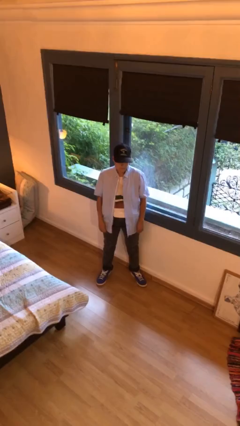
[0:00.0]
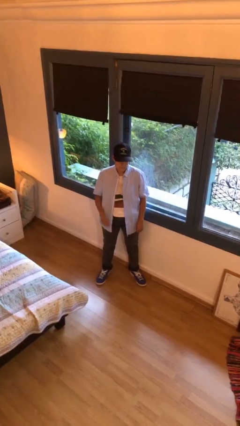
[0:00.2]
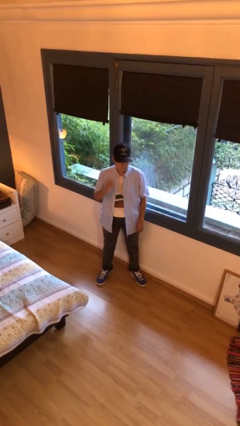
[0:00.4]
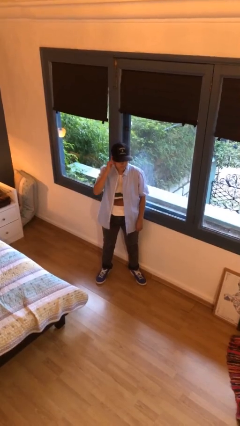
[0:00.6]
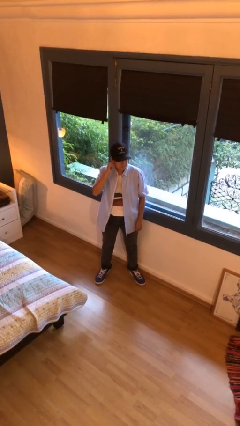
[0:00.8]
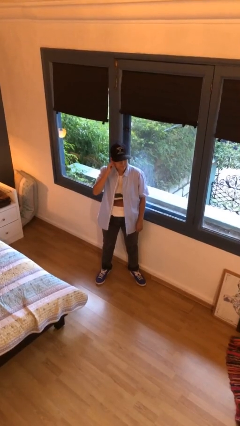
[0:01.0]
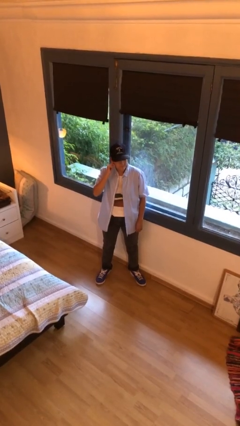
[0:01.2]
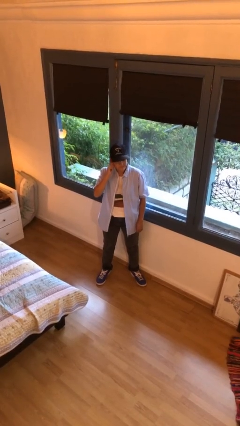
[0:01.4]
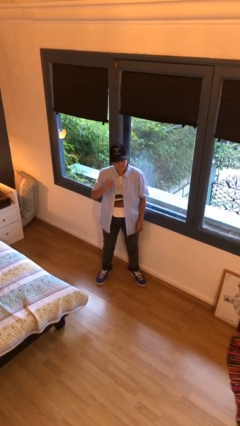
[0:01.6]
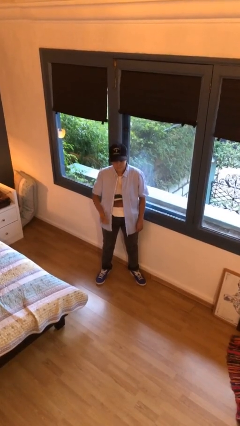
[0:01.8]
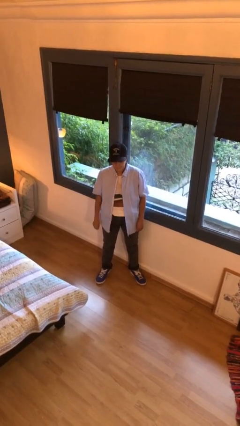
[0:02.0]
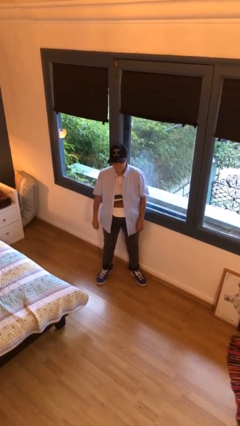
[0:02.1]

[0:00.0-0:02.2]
person touches earlobe

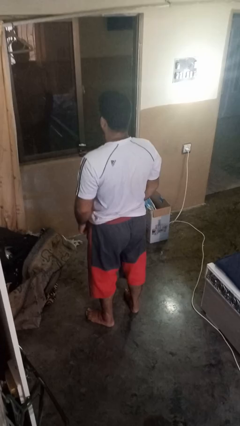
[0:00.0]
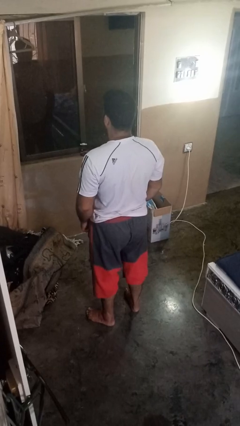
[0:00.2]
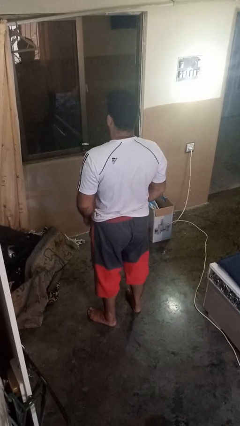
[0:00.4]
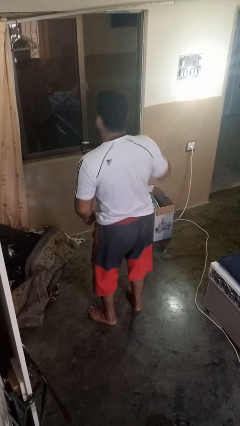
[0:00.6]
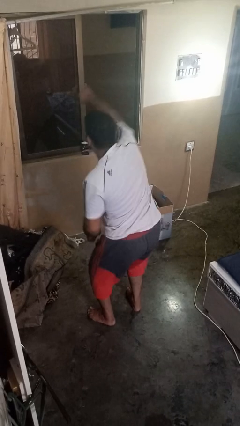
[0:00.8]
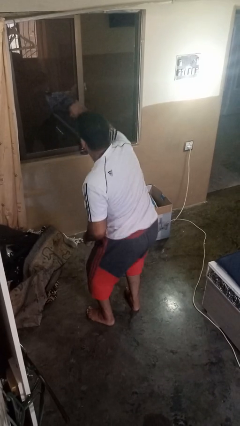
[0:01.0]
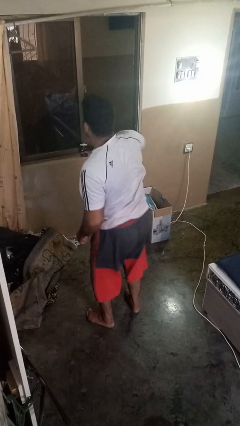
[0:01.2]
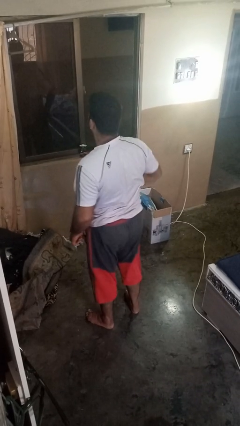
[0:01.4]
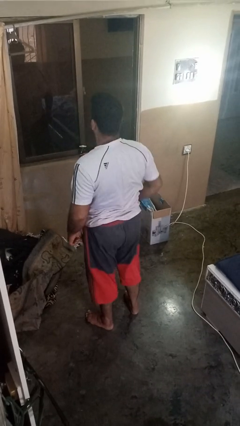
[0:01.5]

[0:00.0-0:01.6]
person karate chop

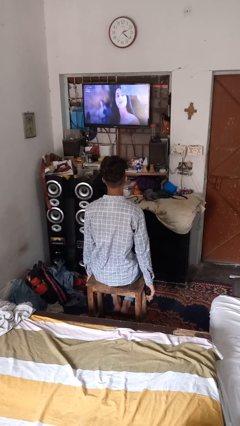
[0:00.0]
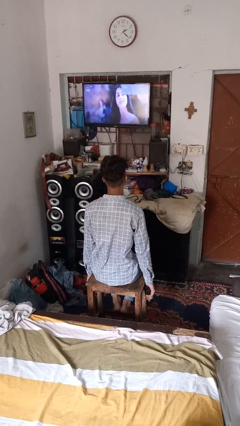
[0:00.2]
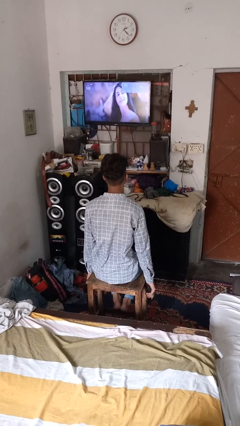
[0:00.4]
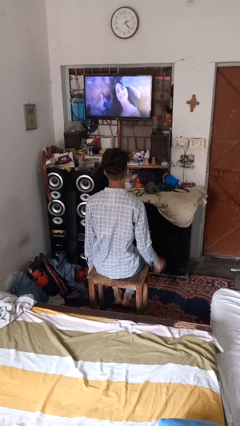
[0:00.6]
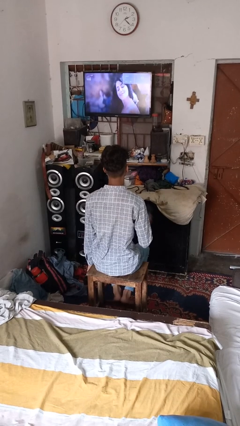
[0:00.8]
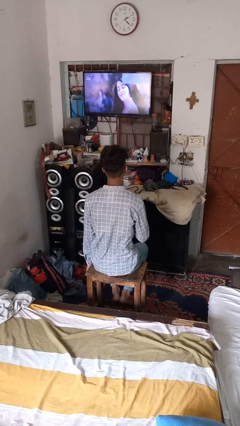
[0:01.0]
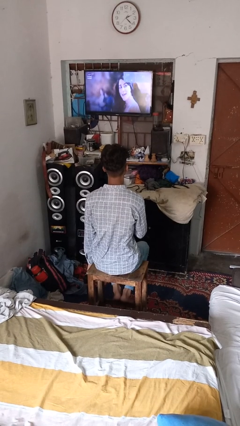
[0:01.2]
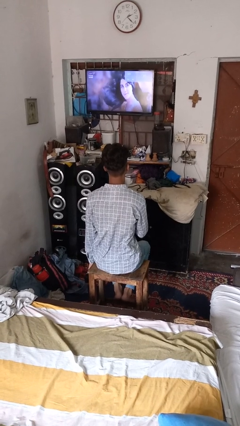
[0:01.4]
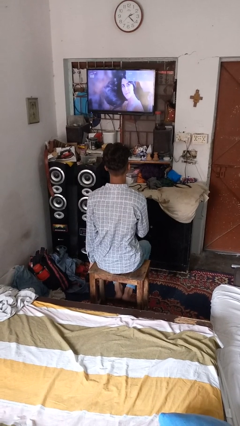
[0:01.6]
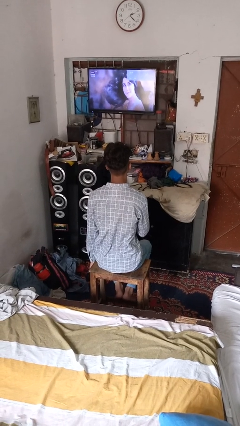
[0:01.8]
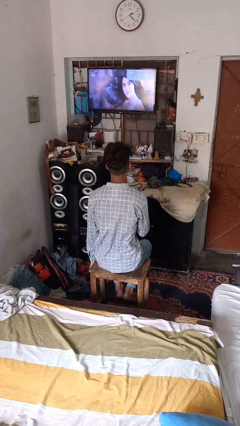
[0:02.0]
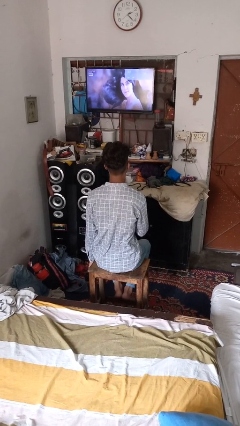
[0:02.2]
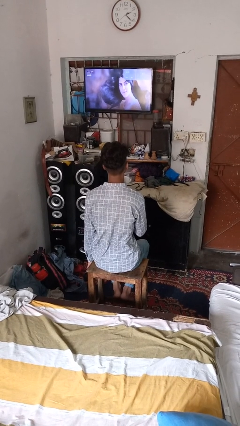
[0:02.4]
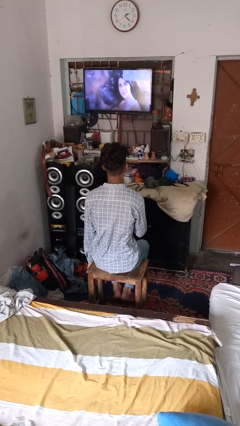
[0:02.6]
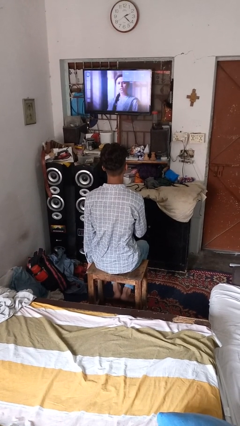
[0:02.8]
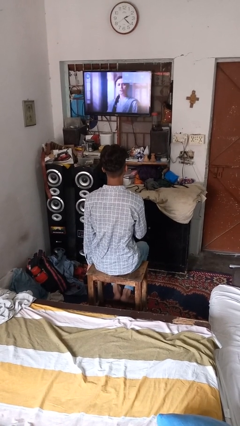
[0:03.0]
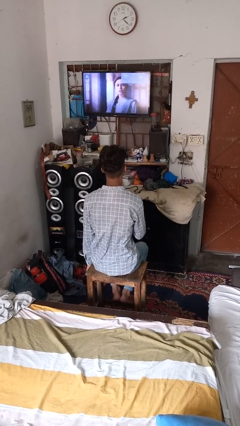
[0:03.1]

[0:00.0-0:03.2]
person uses television remote

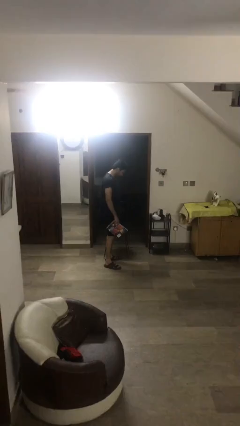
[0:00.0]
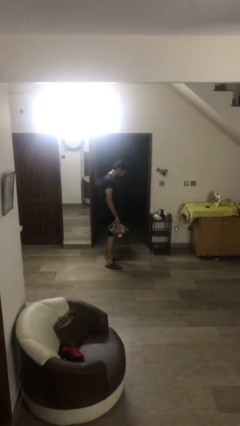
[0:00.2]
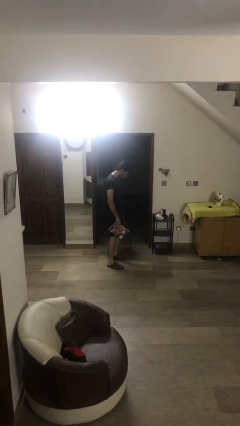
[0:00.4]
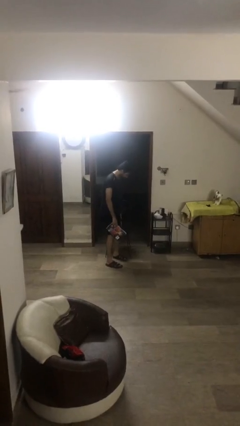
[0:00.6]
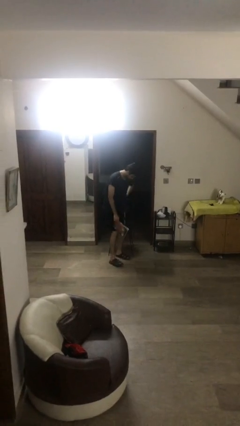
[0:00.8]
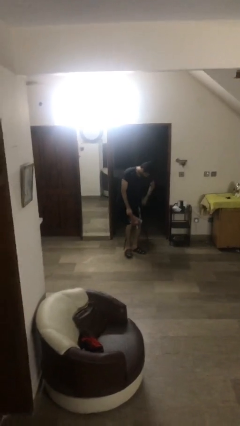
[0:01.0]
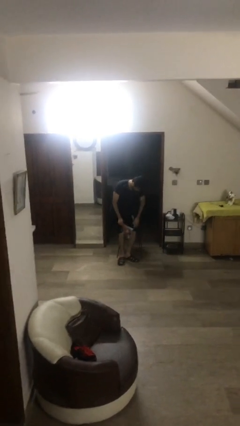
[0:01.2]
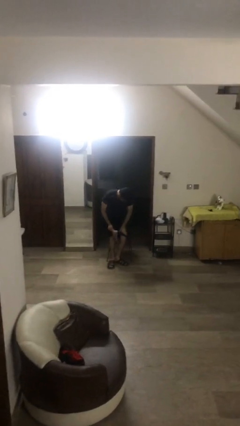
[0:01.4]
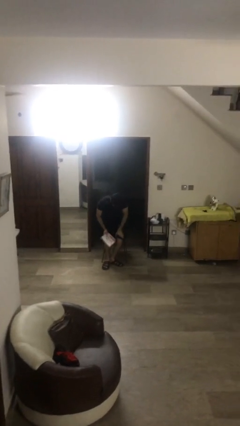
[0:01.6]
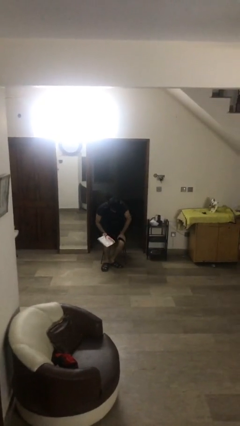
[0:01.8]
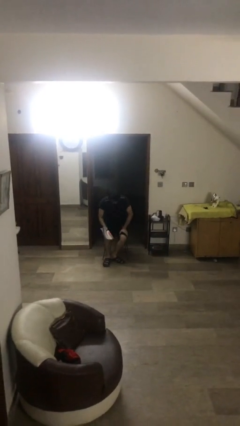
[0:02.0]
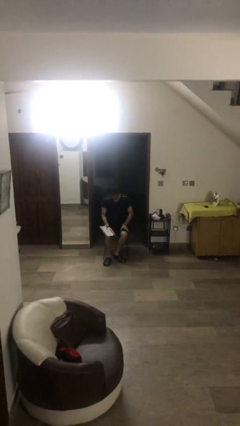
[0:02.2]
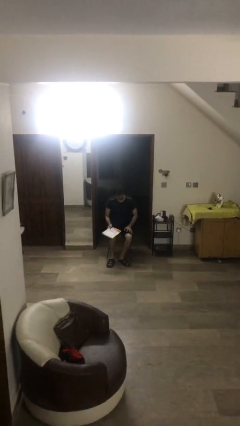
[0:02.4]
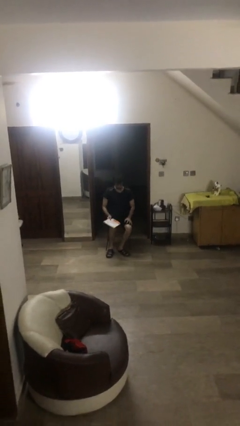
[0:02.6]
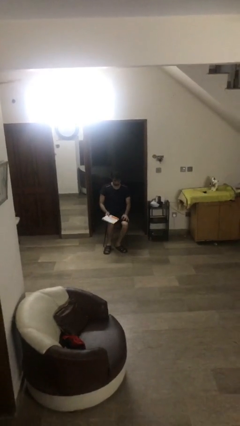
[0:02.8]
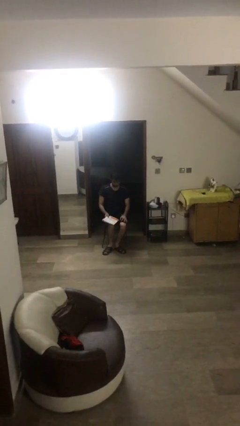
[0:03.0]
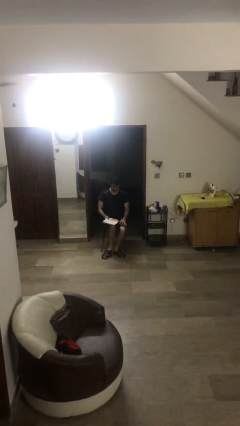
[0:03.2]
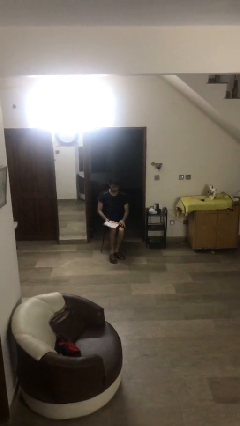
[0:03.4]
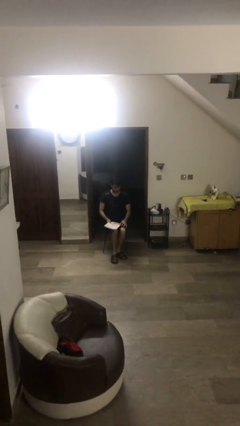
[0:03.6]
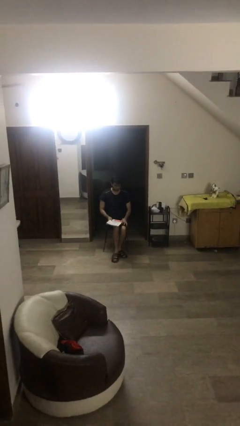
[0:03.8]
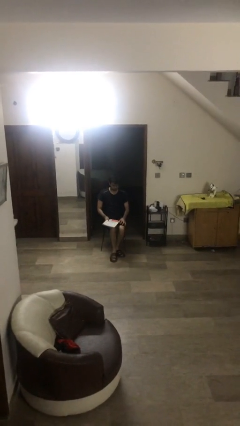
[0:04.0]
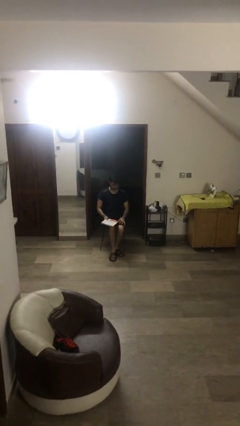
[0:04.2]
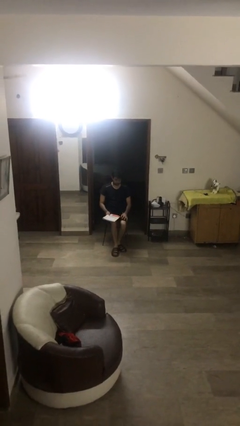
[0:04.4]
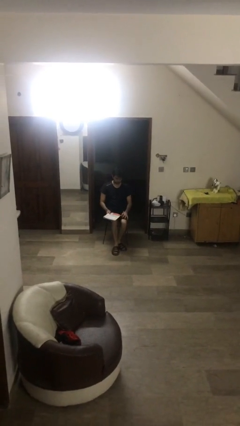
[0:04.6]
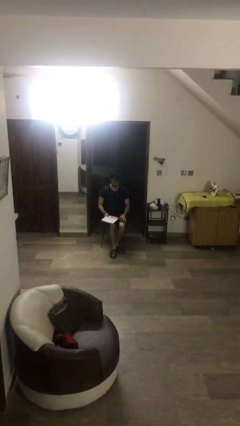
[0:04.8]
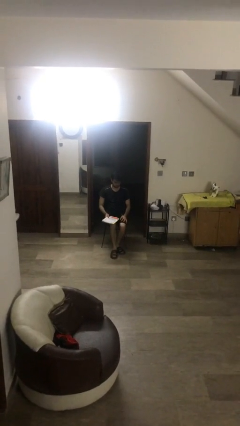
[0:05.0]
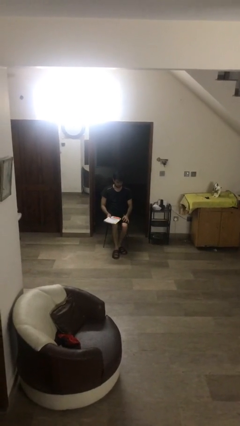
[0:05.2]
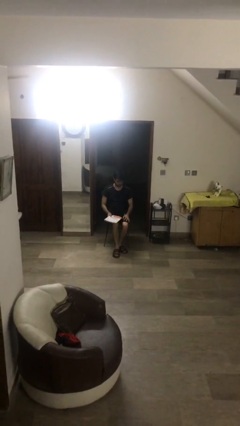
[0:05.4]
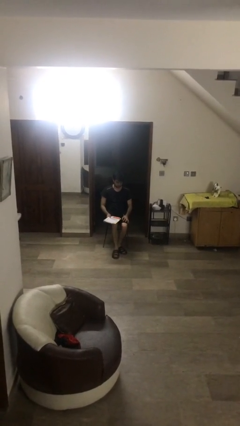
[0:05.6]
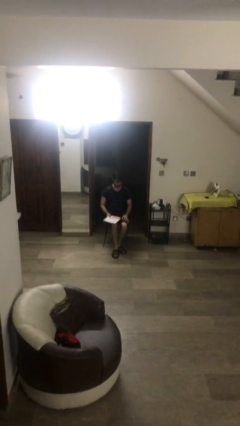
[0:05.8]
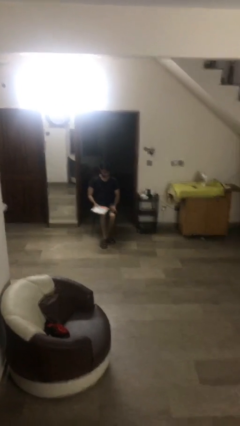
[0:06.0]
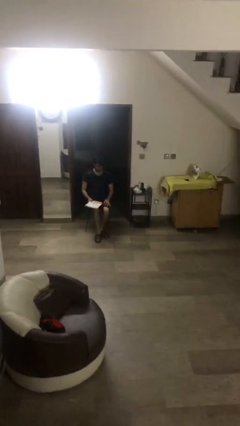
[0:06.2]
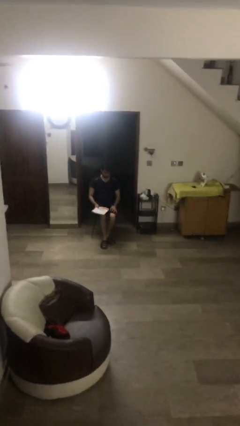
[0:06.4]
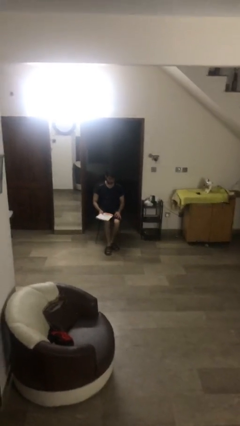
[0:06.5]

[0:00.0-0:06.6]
person sits down

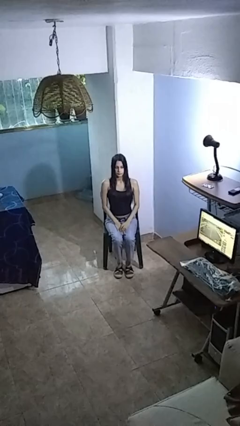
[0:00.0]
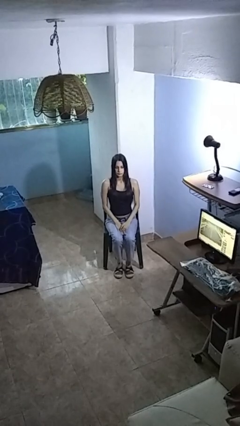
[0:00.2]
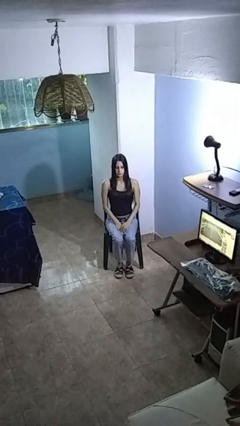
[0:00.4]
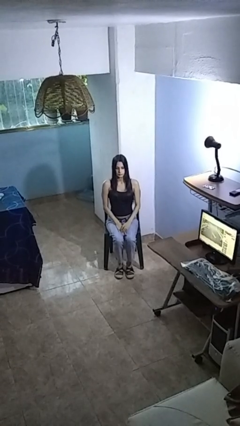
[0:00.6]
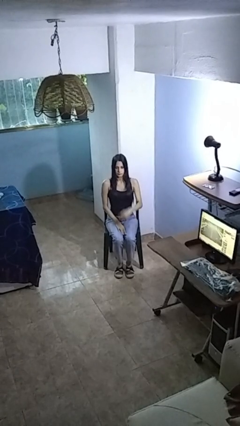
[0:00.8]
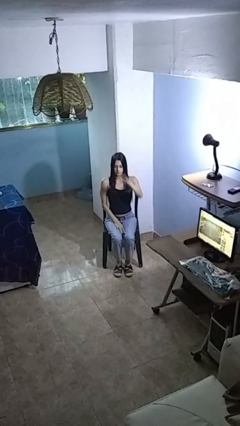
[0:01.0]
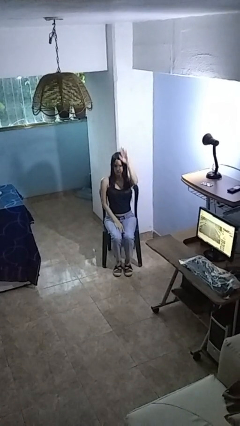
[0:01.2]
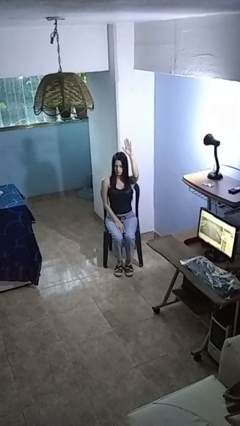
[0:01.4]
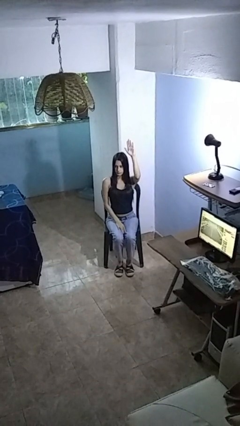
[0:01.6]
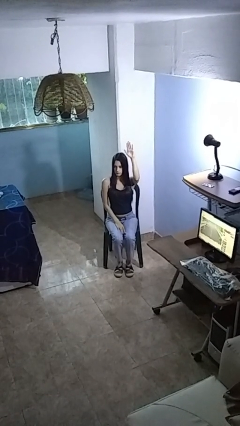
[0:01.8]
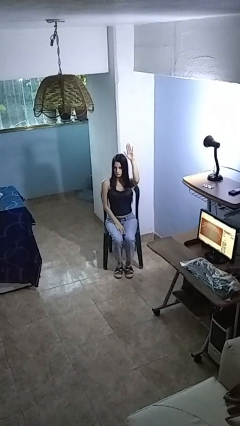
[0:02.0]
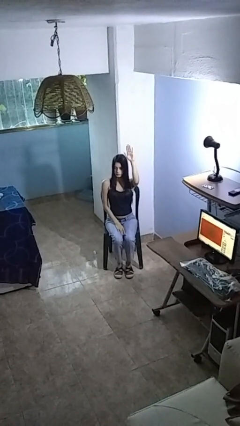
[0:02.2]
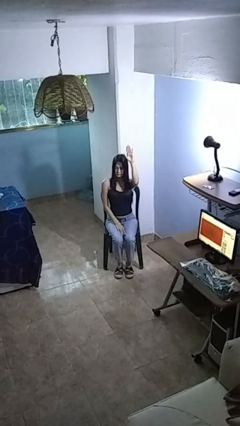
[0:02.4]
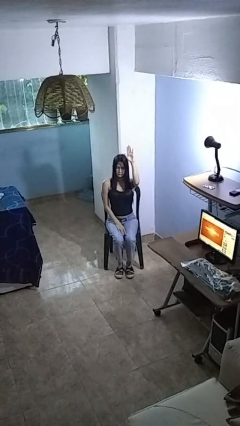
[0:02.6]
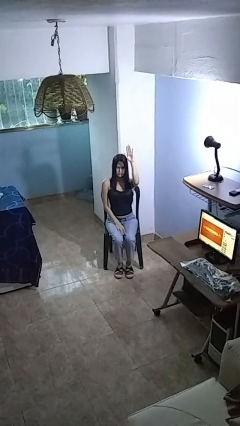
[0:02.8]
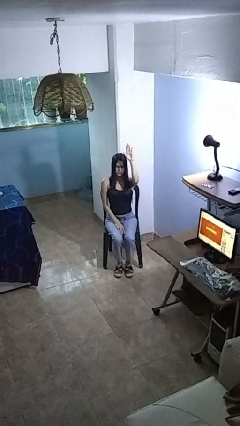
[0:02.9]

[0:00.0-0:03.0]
person gestures raise hand

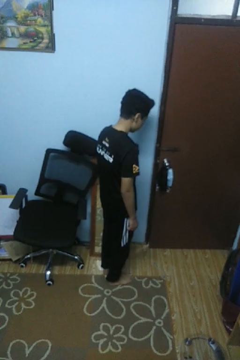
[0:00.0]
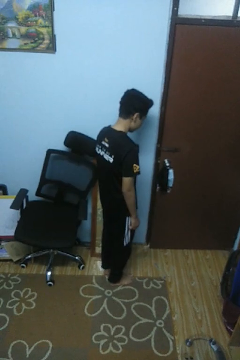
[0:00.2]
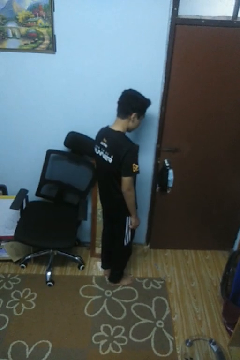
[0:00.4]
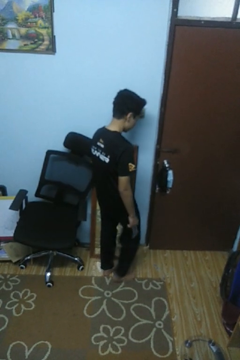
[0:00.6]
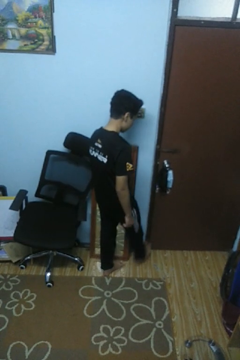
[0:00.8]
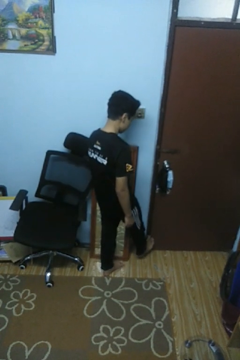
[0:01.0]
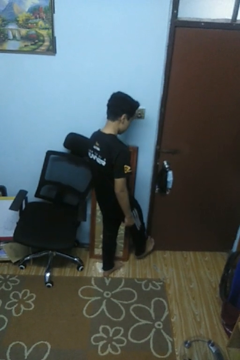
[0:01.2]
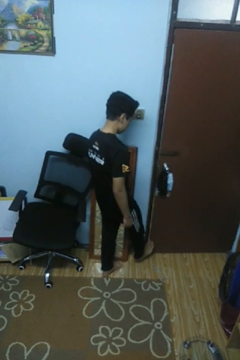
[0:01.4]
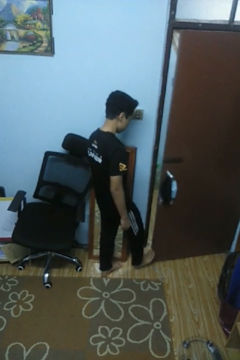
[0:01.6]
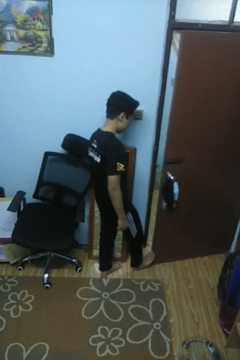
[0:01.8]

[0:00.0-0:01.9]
person opens facility door
